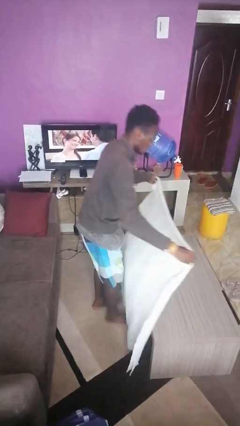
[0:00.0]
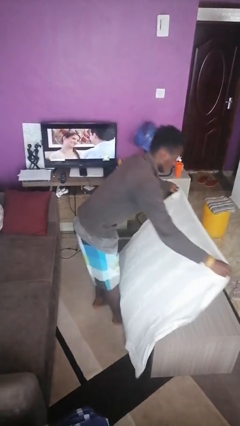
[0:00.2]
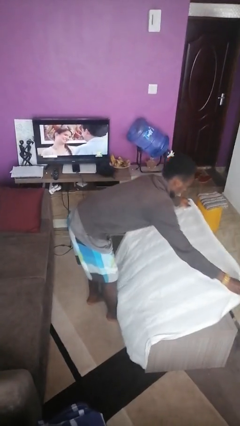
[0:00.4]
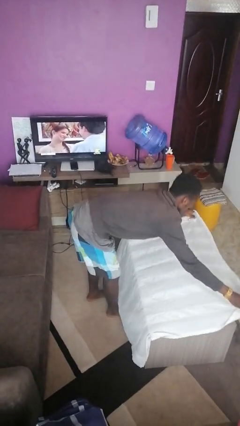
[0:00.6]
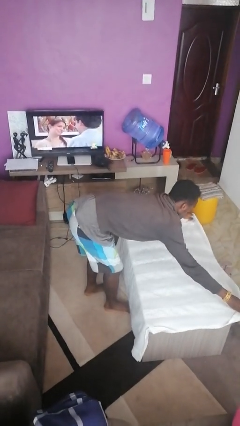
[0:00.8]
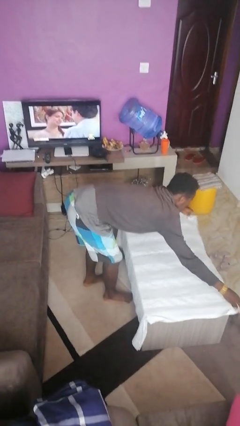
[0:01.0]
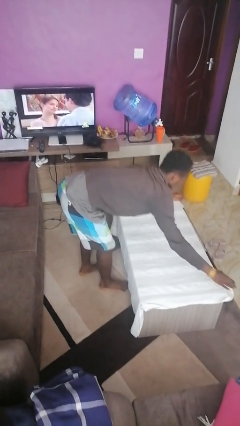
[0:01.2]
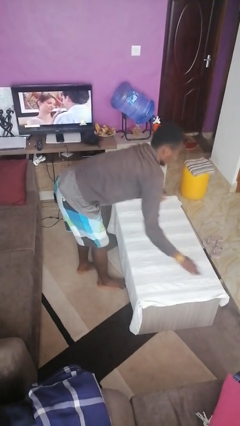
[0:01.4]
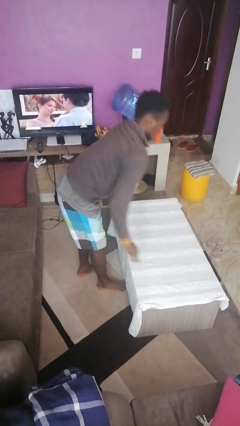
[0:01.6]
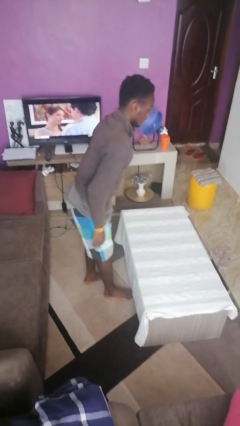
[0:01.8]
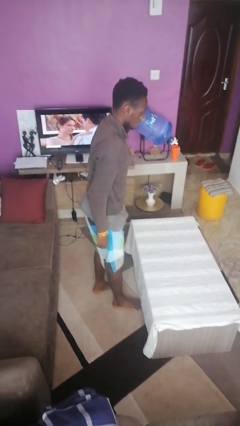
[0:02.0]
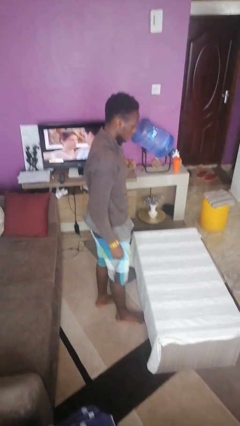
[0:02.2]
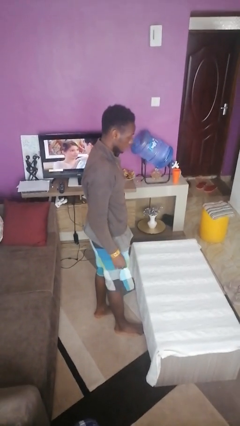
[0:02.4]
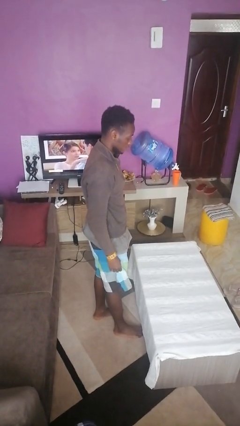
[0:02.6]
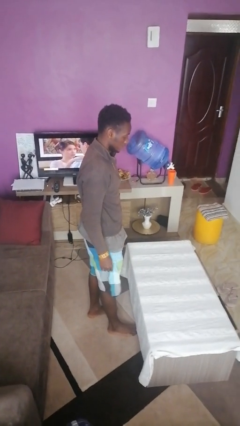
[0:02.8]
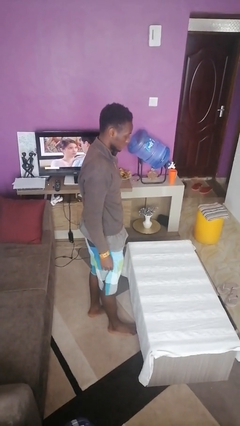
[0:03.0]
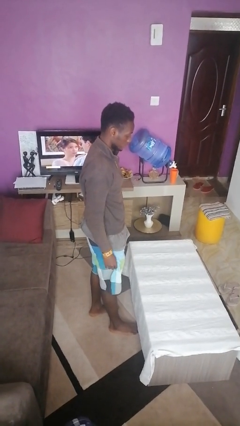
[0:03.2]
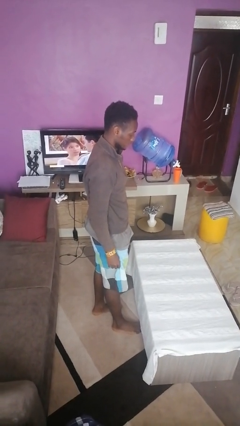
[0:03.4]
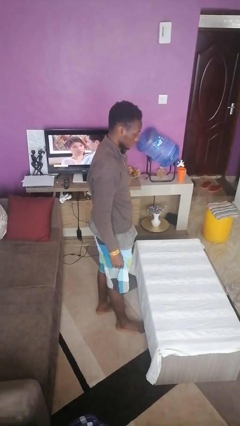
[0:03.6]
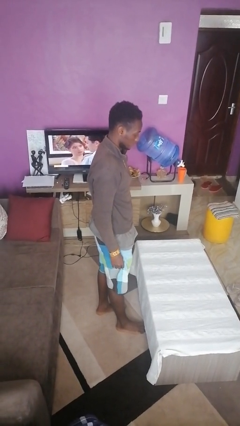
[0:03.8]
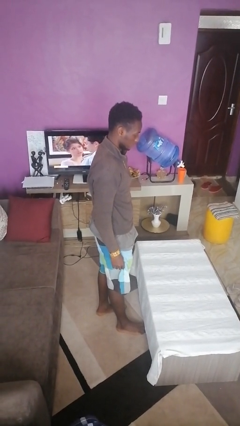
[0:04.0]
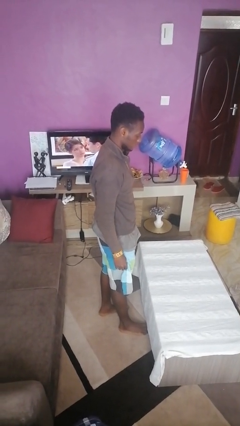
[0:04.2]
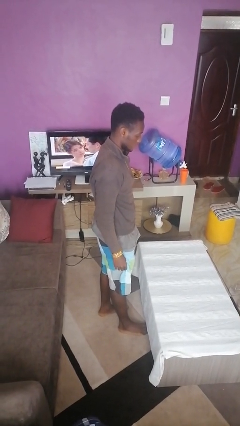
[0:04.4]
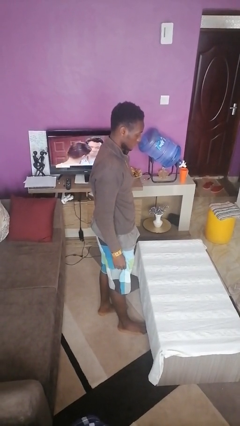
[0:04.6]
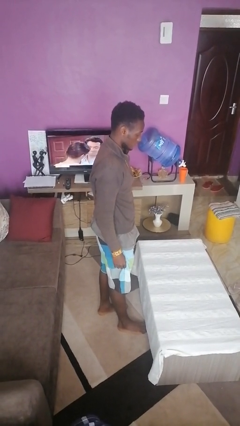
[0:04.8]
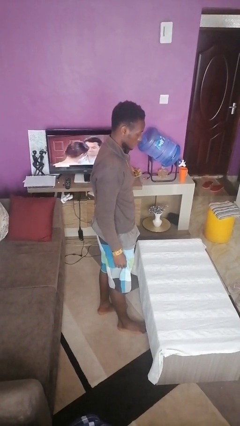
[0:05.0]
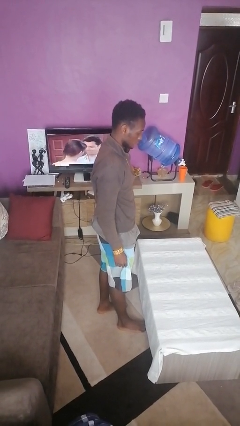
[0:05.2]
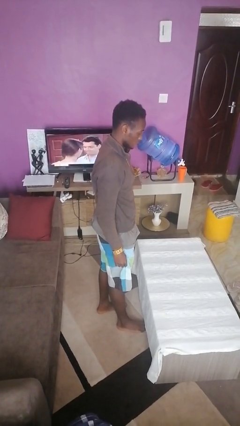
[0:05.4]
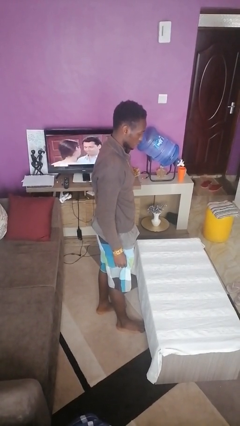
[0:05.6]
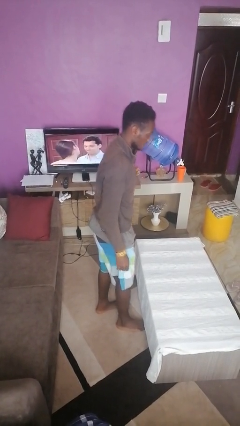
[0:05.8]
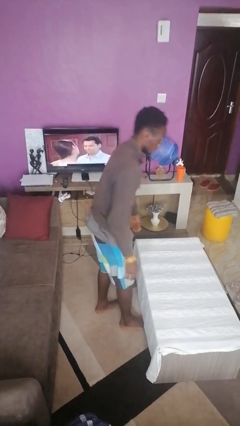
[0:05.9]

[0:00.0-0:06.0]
person spreads tablecloth

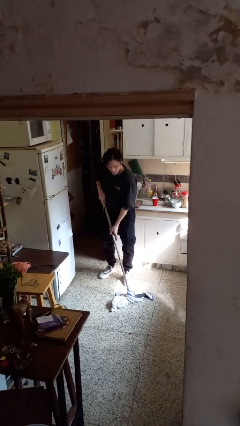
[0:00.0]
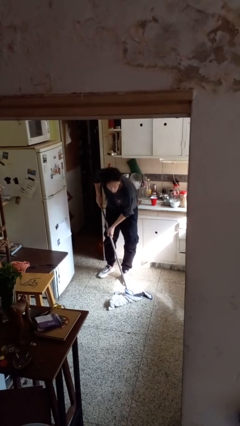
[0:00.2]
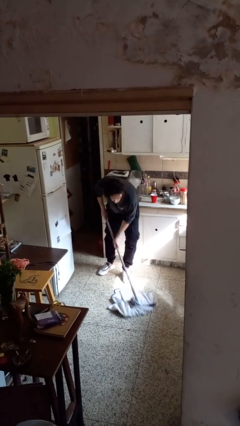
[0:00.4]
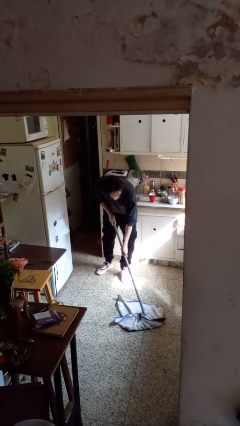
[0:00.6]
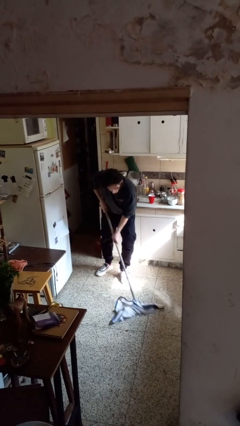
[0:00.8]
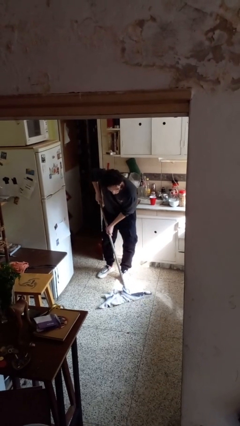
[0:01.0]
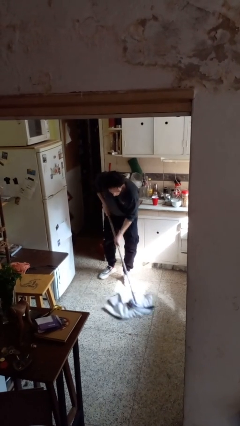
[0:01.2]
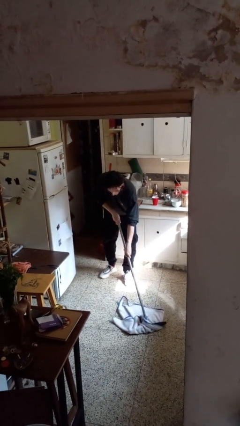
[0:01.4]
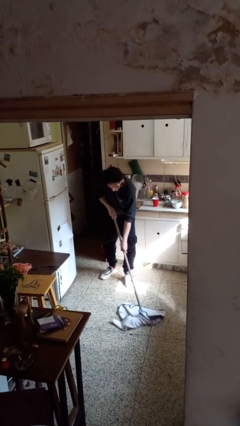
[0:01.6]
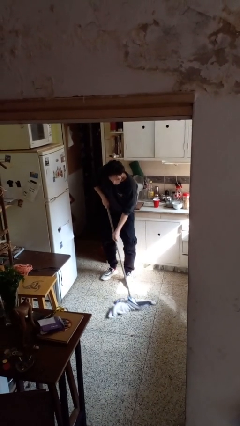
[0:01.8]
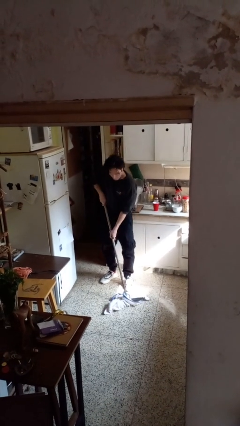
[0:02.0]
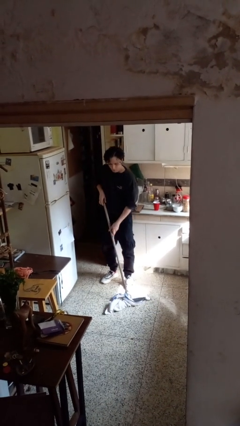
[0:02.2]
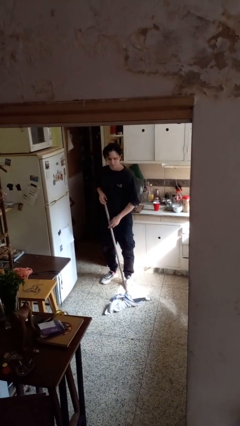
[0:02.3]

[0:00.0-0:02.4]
person mops

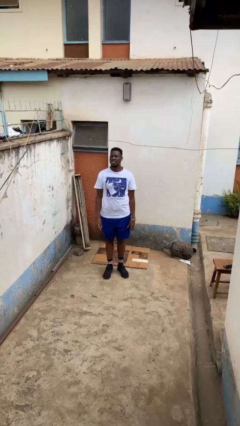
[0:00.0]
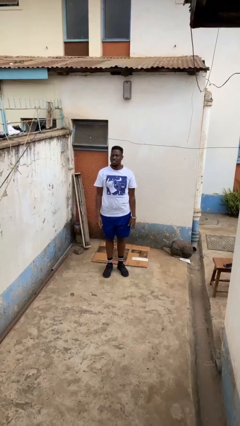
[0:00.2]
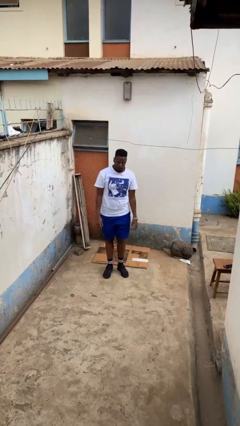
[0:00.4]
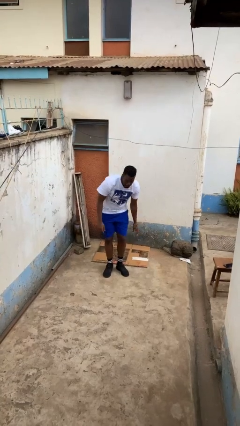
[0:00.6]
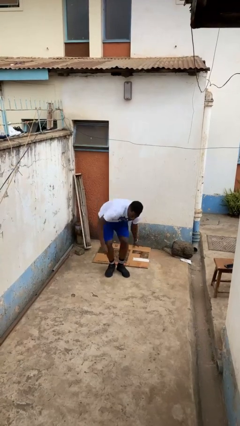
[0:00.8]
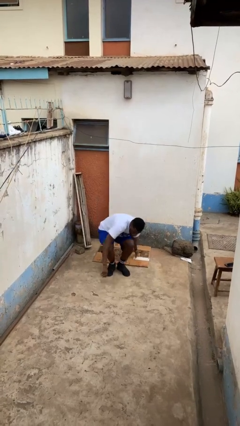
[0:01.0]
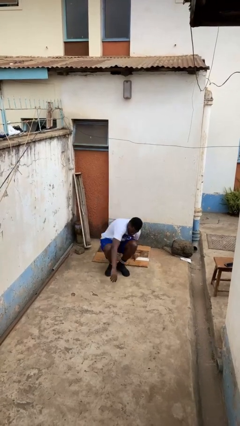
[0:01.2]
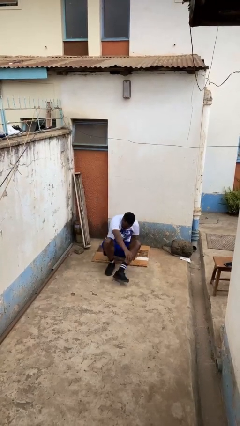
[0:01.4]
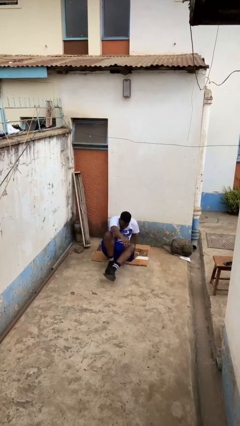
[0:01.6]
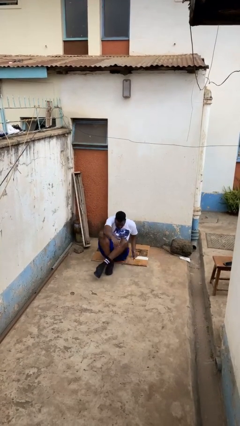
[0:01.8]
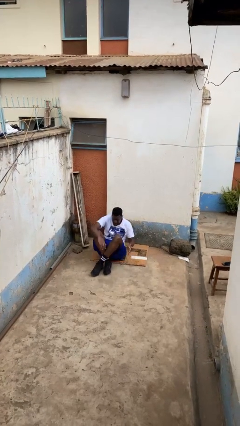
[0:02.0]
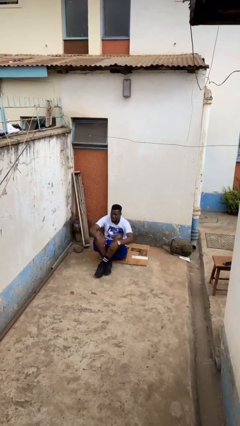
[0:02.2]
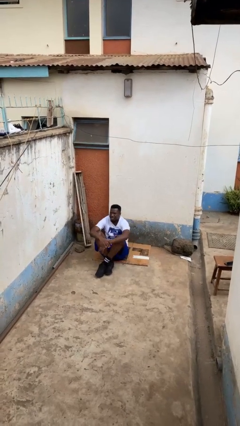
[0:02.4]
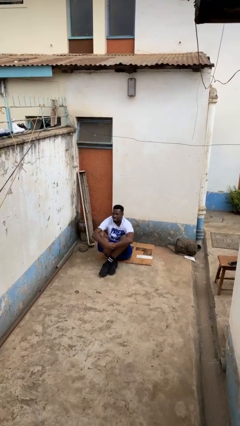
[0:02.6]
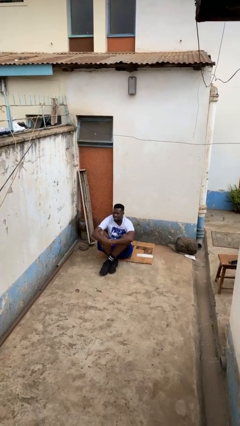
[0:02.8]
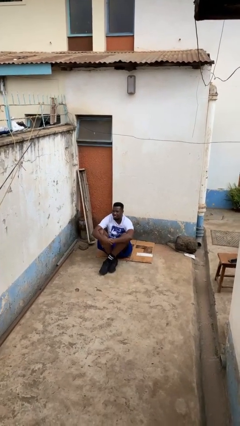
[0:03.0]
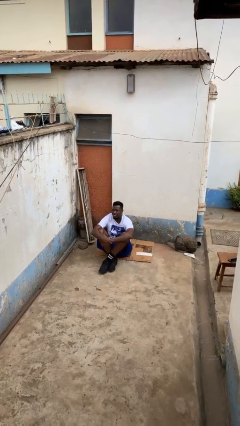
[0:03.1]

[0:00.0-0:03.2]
person sits crisscross

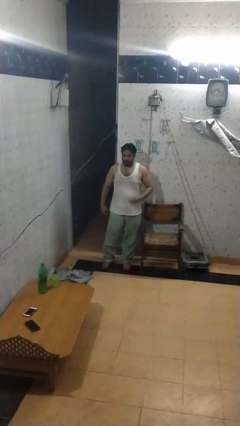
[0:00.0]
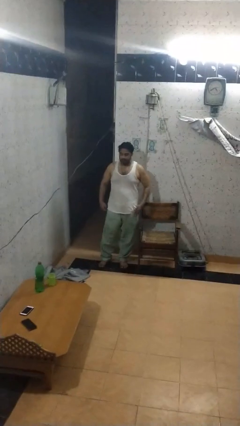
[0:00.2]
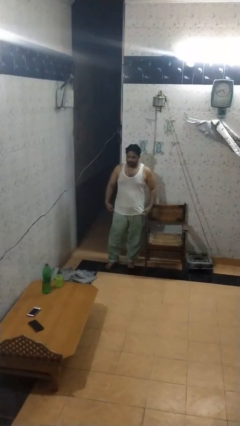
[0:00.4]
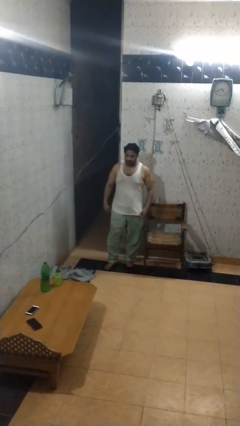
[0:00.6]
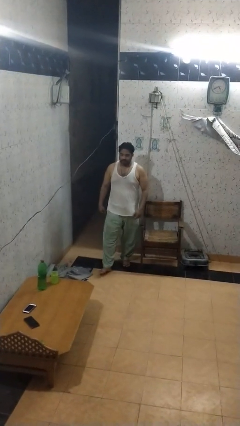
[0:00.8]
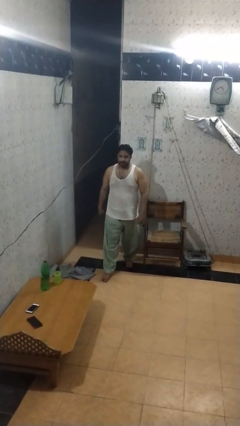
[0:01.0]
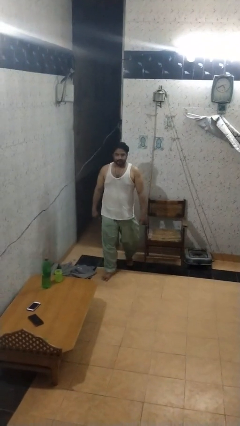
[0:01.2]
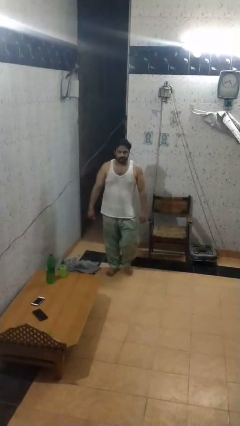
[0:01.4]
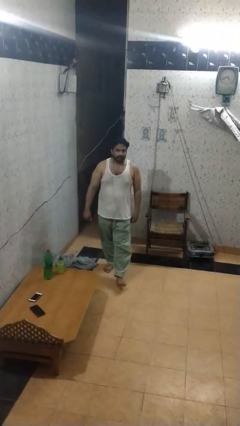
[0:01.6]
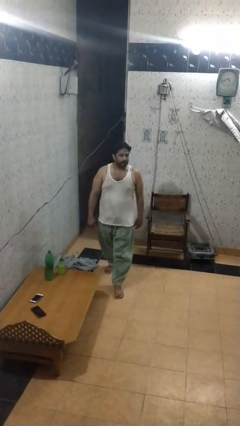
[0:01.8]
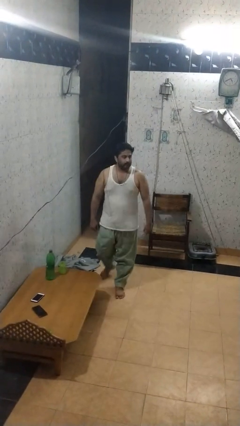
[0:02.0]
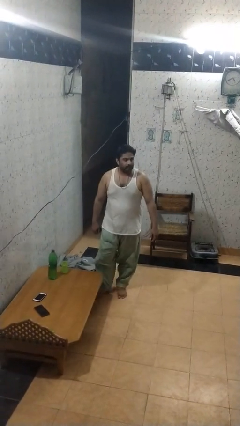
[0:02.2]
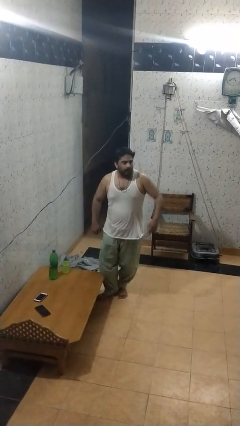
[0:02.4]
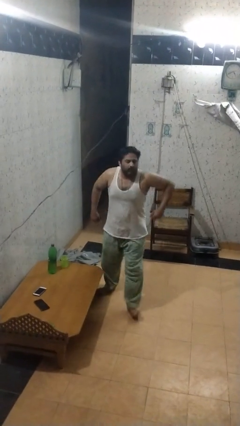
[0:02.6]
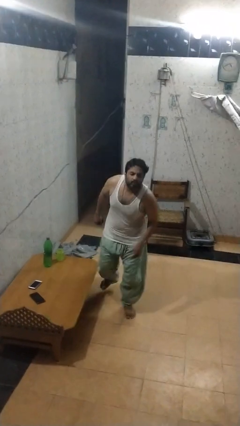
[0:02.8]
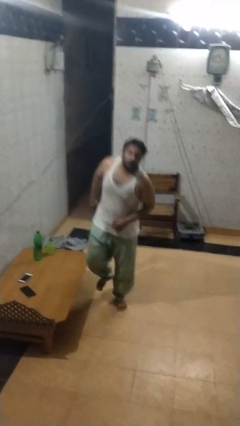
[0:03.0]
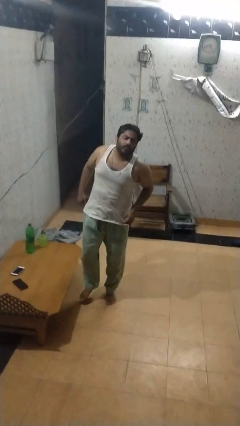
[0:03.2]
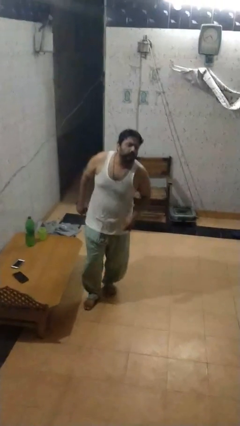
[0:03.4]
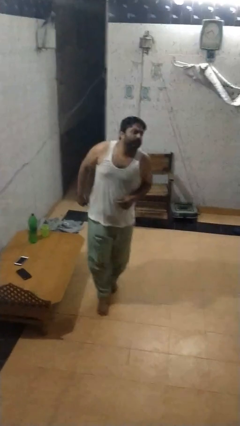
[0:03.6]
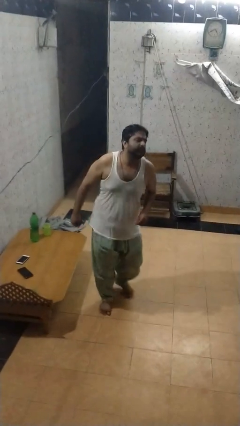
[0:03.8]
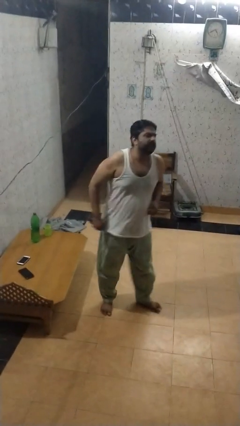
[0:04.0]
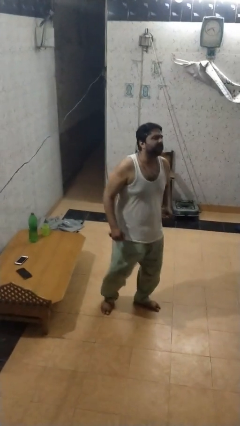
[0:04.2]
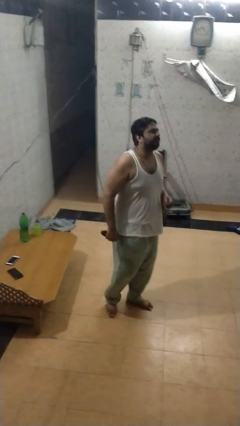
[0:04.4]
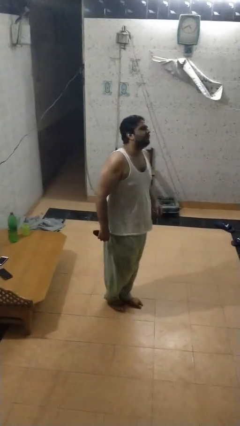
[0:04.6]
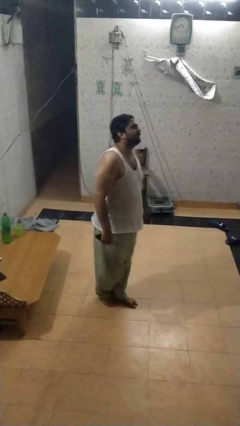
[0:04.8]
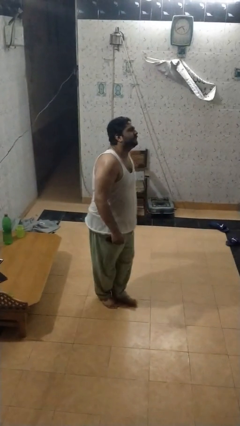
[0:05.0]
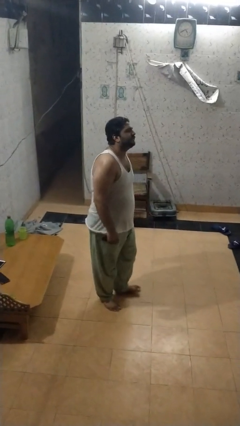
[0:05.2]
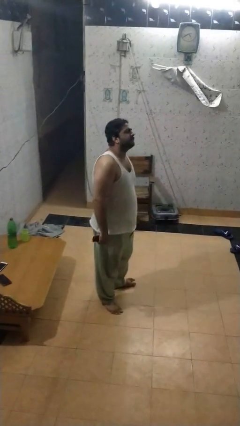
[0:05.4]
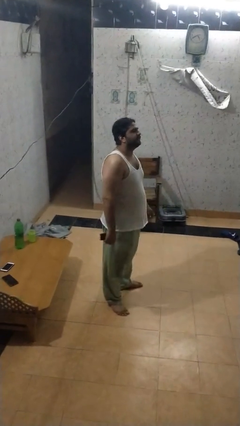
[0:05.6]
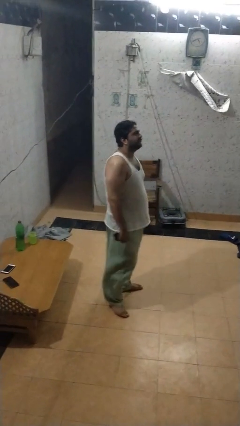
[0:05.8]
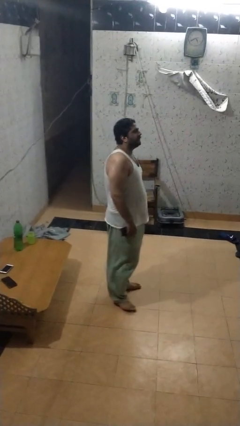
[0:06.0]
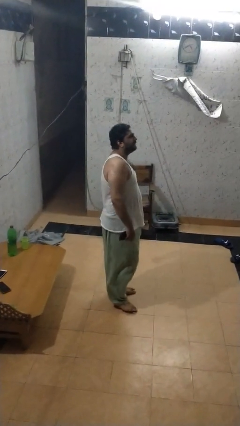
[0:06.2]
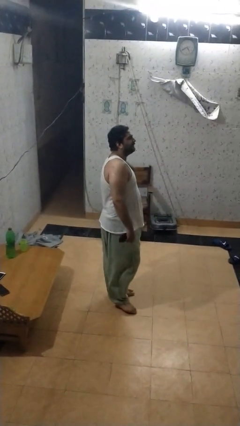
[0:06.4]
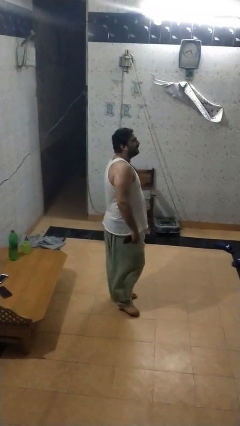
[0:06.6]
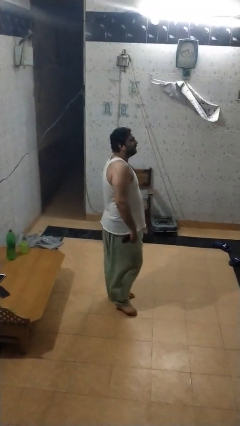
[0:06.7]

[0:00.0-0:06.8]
person bumps into table
